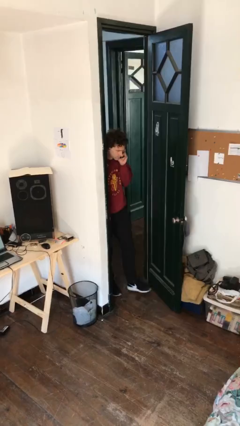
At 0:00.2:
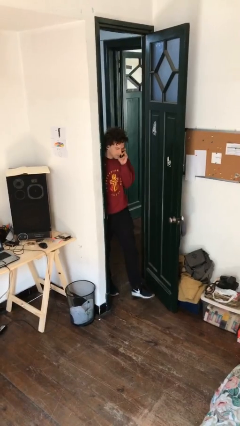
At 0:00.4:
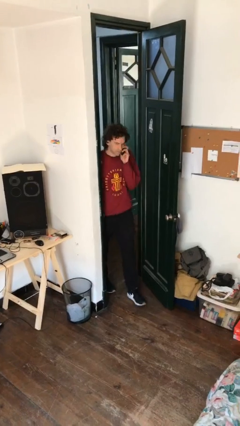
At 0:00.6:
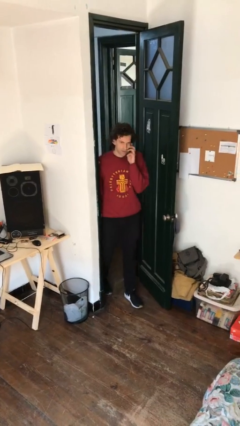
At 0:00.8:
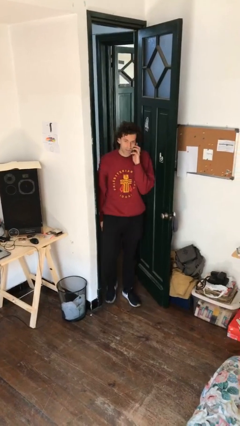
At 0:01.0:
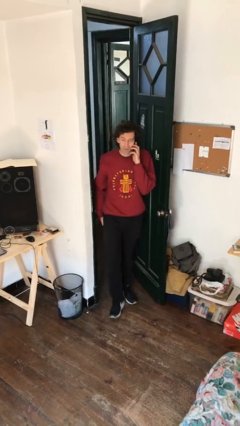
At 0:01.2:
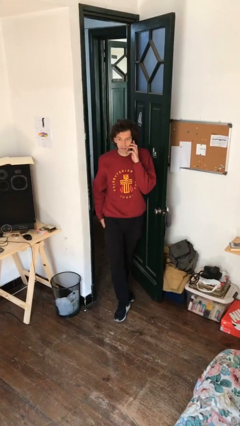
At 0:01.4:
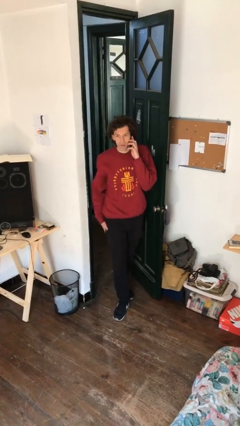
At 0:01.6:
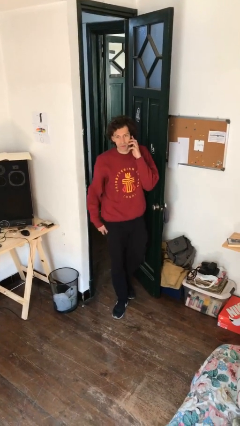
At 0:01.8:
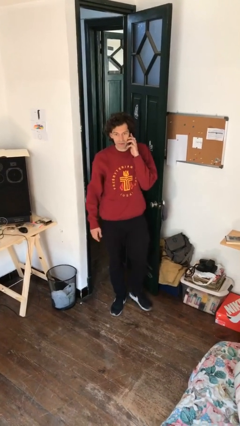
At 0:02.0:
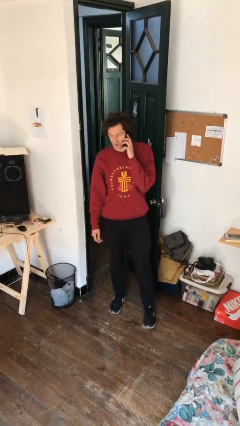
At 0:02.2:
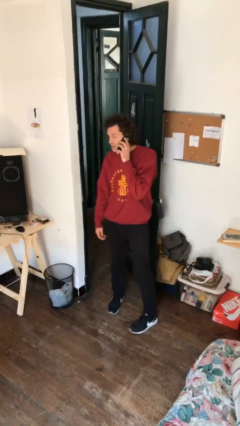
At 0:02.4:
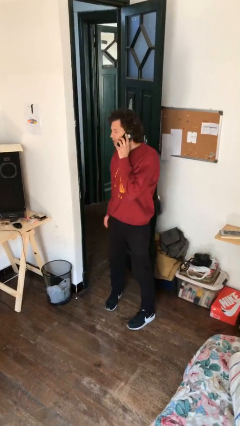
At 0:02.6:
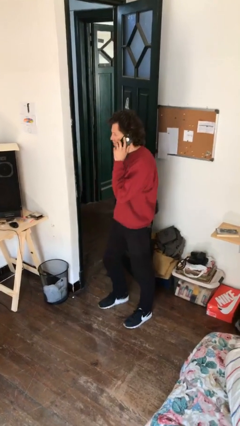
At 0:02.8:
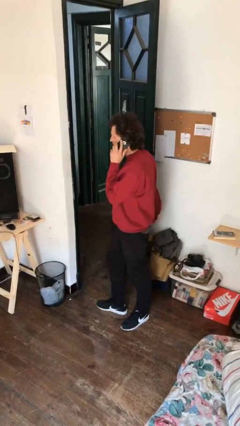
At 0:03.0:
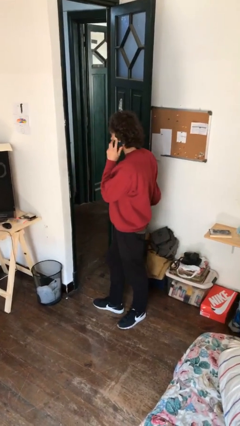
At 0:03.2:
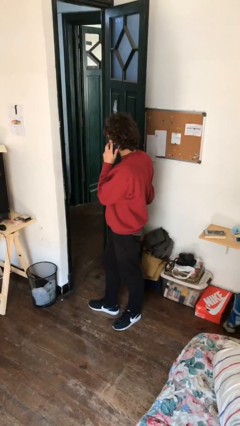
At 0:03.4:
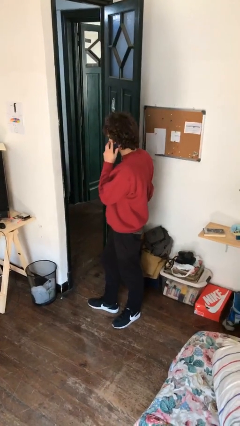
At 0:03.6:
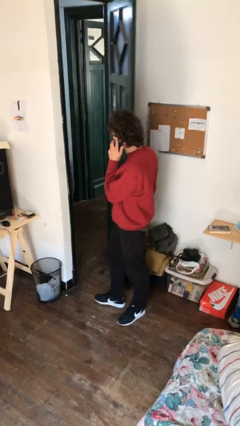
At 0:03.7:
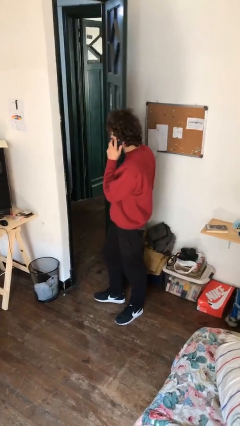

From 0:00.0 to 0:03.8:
person enters scene through structure

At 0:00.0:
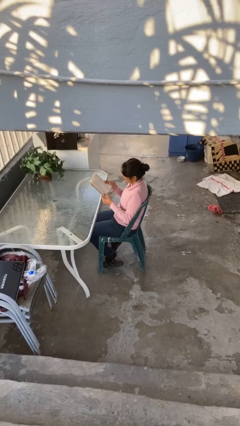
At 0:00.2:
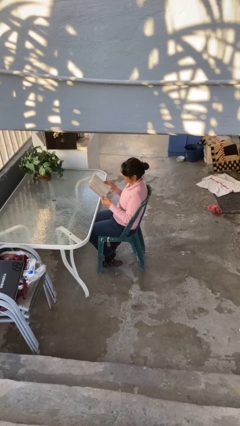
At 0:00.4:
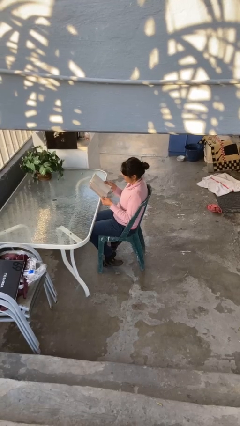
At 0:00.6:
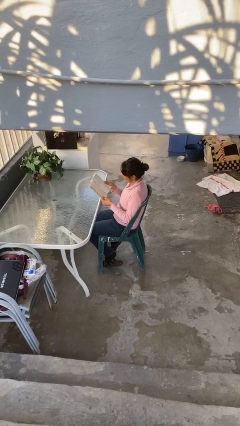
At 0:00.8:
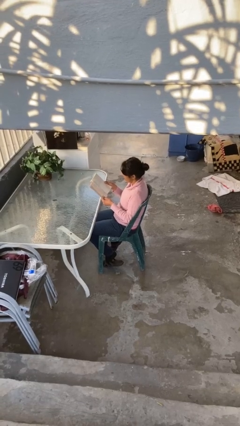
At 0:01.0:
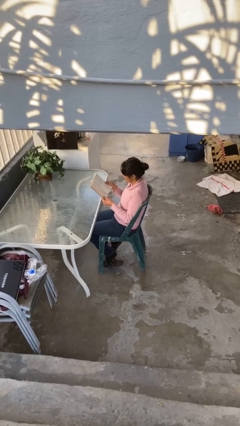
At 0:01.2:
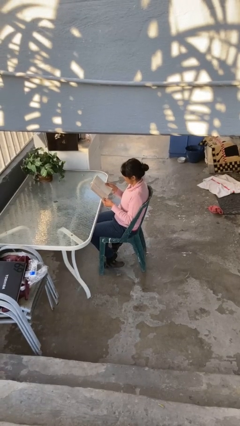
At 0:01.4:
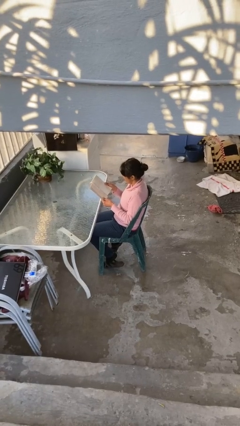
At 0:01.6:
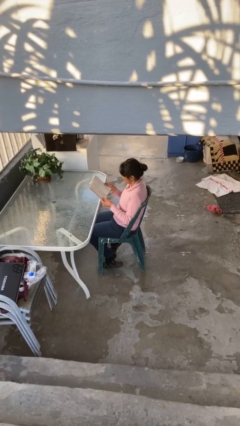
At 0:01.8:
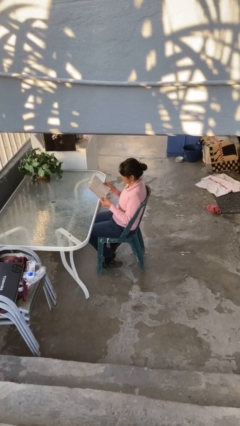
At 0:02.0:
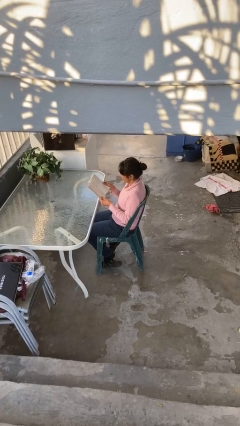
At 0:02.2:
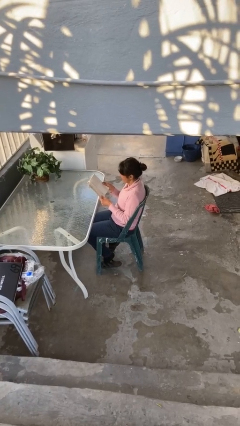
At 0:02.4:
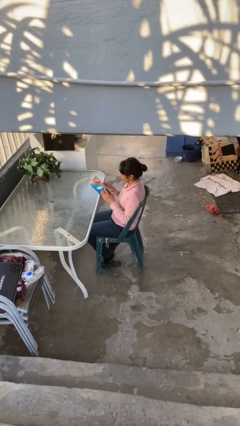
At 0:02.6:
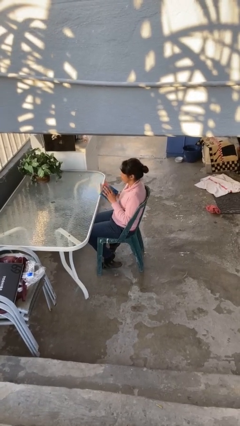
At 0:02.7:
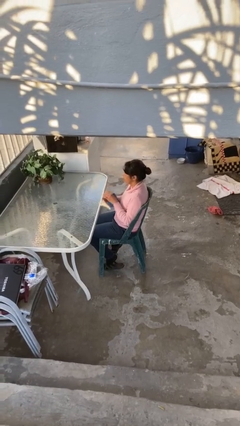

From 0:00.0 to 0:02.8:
person reads document

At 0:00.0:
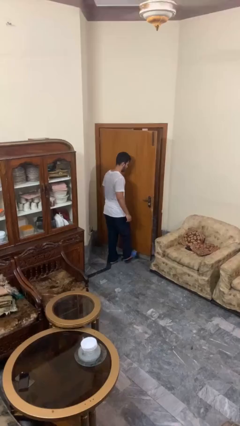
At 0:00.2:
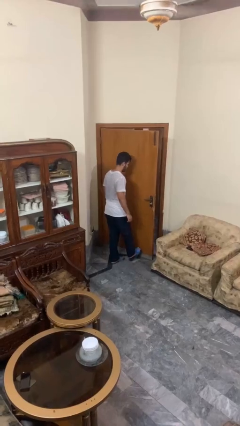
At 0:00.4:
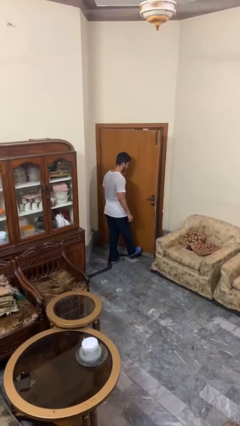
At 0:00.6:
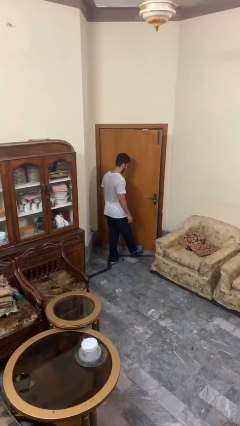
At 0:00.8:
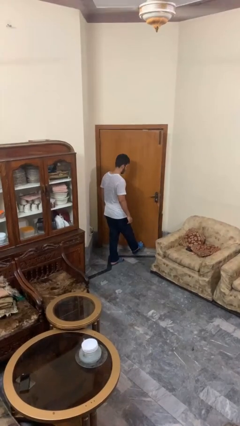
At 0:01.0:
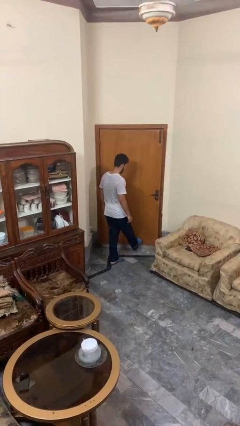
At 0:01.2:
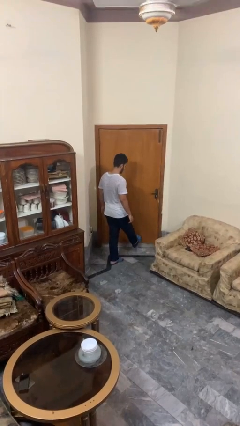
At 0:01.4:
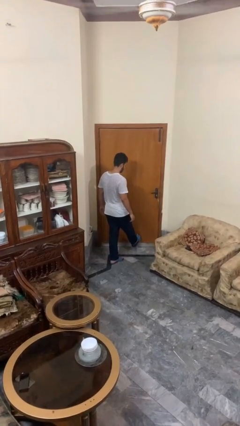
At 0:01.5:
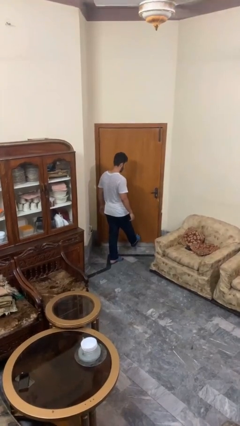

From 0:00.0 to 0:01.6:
person closes door with foot

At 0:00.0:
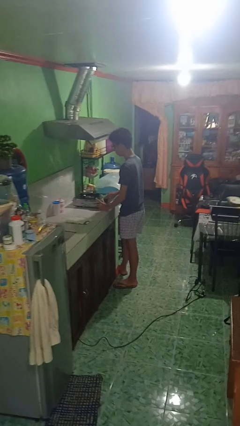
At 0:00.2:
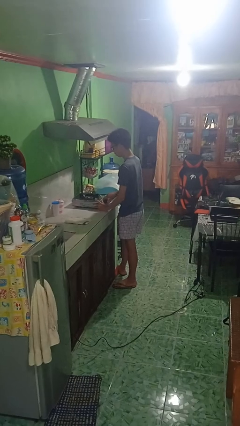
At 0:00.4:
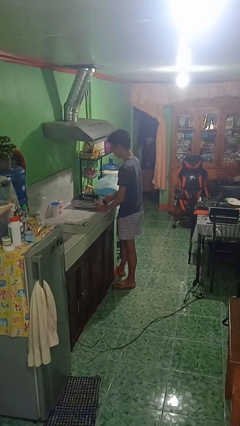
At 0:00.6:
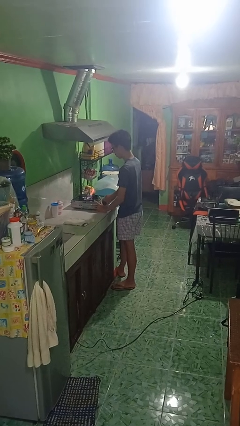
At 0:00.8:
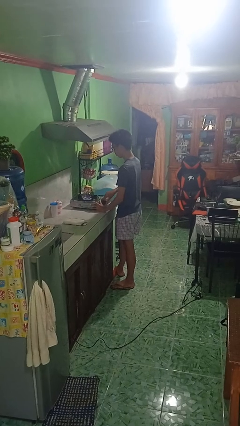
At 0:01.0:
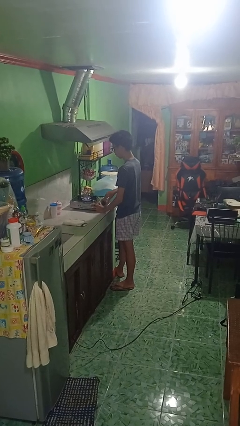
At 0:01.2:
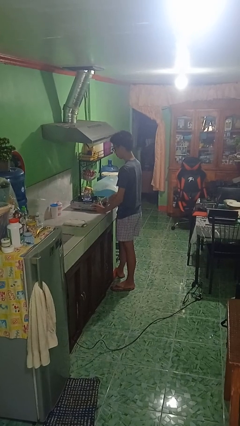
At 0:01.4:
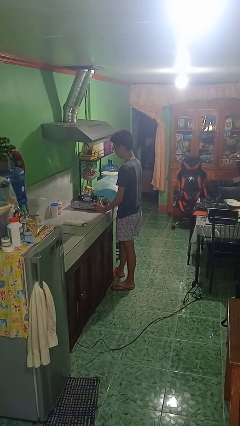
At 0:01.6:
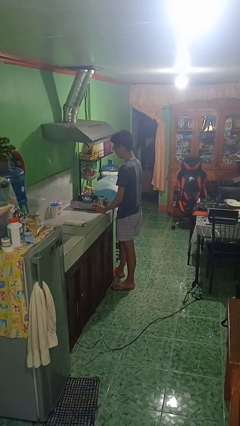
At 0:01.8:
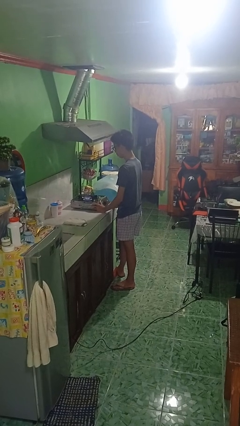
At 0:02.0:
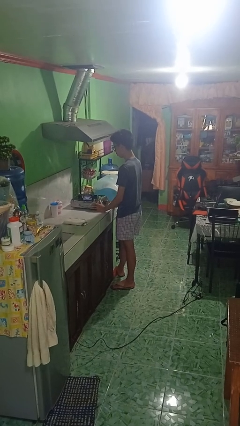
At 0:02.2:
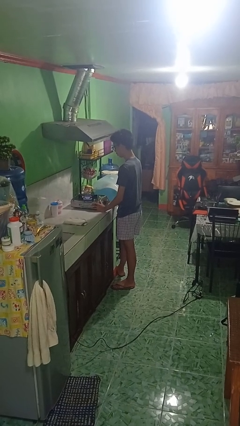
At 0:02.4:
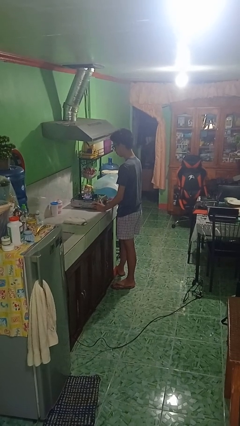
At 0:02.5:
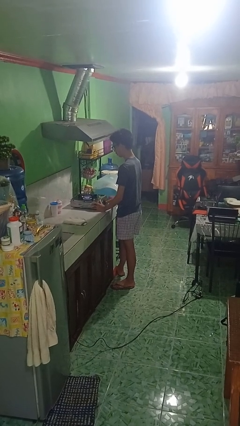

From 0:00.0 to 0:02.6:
person turns on stovetop

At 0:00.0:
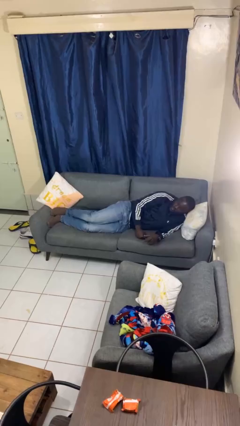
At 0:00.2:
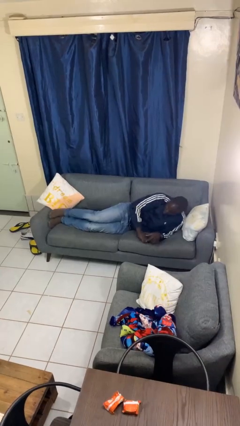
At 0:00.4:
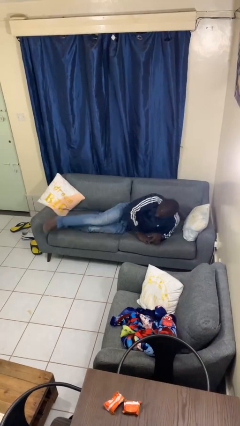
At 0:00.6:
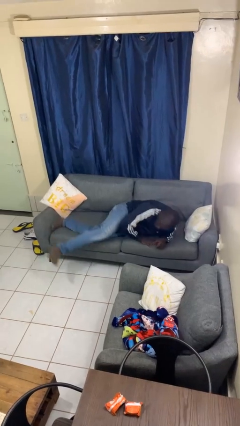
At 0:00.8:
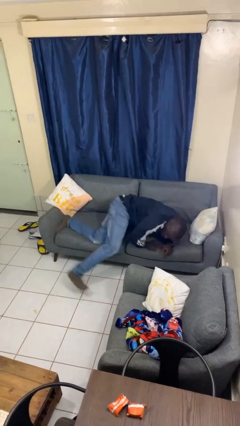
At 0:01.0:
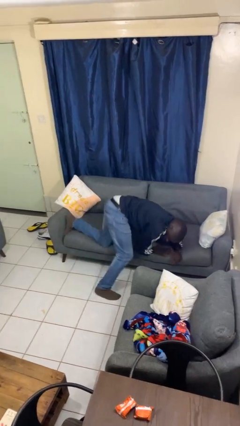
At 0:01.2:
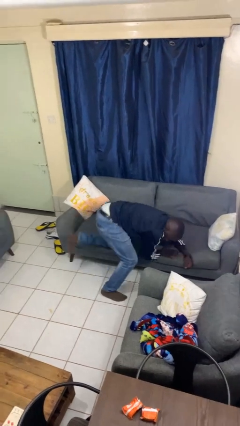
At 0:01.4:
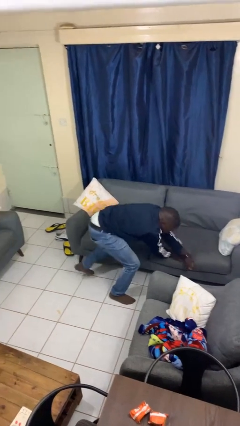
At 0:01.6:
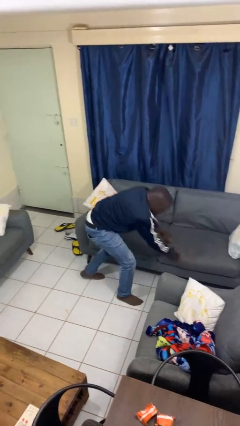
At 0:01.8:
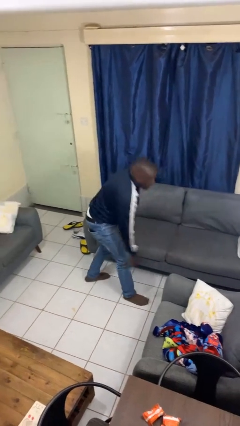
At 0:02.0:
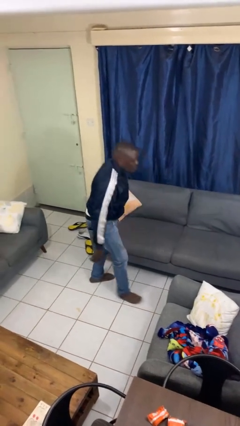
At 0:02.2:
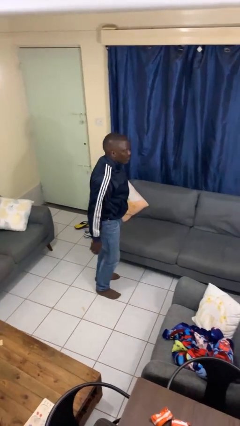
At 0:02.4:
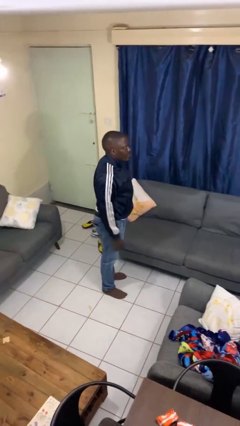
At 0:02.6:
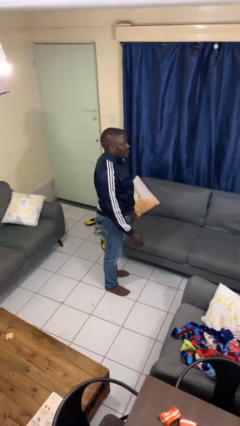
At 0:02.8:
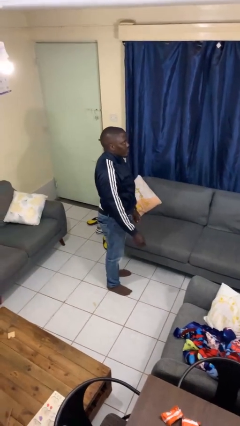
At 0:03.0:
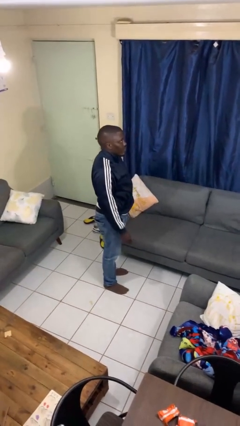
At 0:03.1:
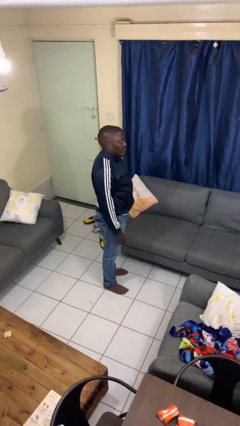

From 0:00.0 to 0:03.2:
person stands up

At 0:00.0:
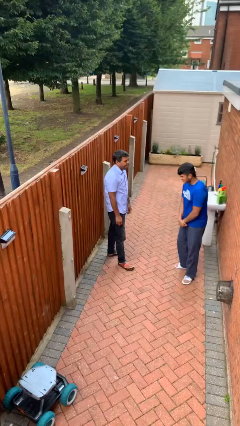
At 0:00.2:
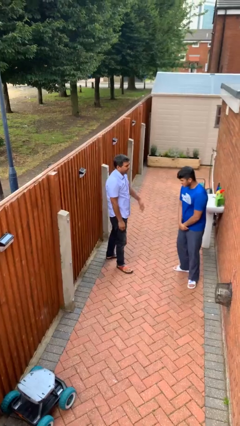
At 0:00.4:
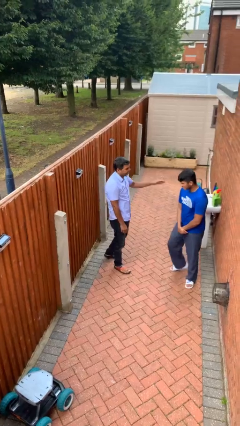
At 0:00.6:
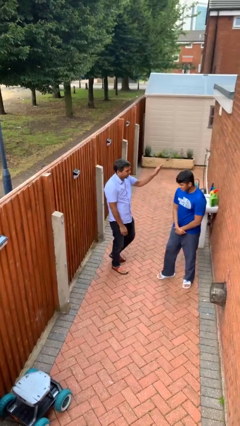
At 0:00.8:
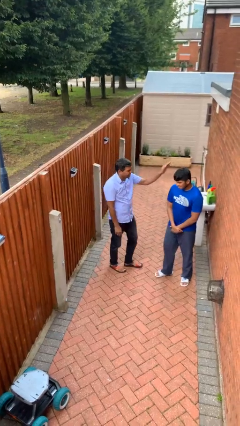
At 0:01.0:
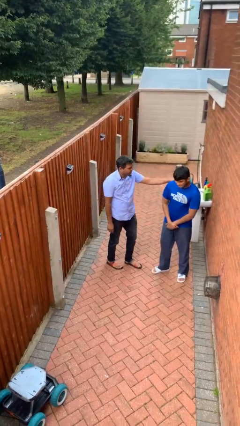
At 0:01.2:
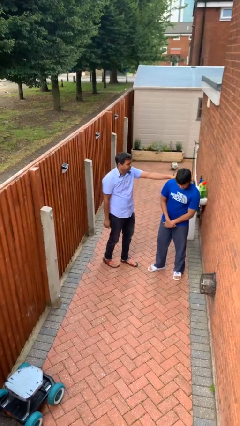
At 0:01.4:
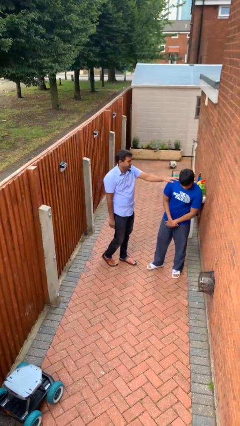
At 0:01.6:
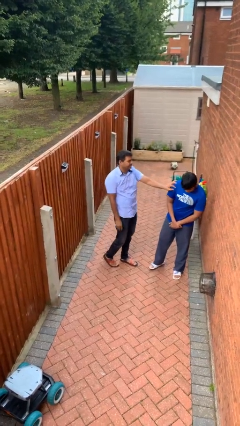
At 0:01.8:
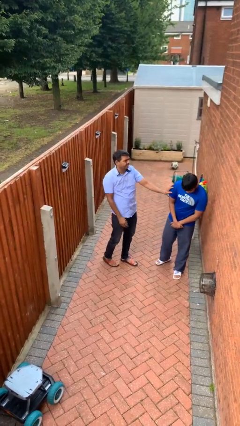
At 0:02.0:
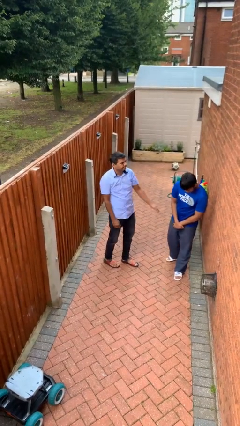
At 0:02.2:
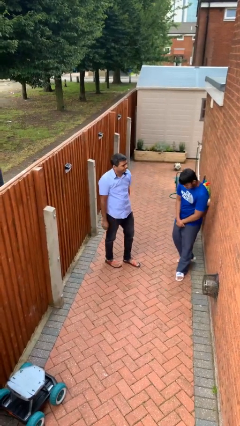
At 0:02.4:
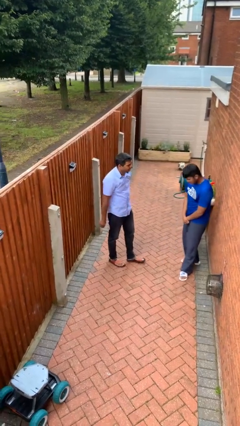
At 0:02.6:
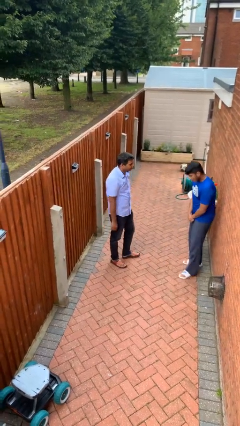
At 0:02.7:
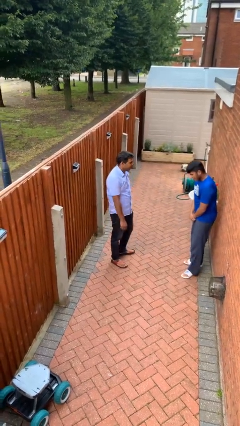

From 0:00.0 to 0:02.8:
person shoves person

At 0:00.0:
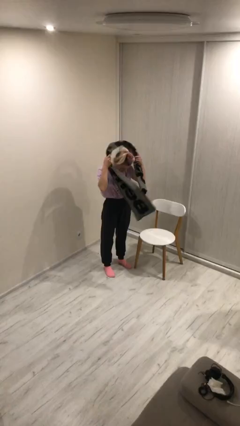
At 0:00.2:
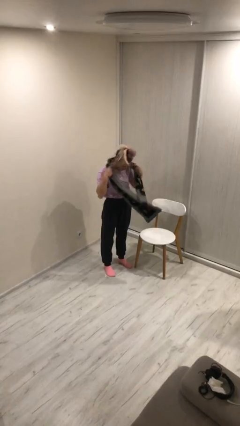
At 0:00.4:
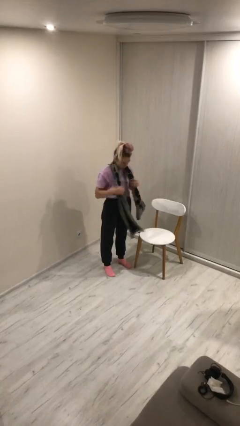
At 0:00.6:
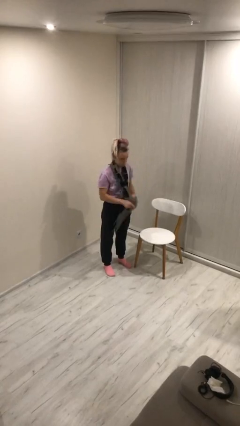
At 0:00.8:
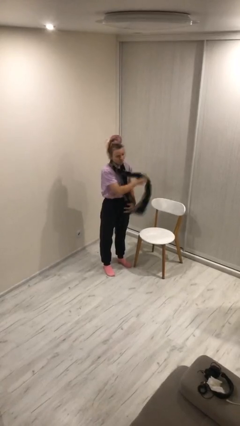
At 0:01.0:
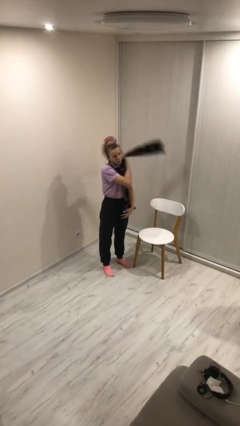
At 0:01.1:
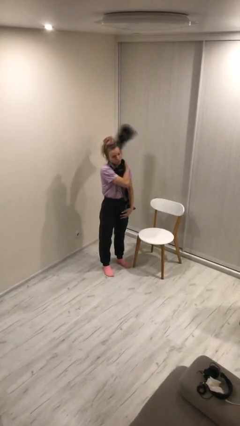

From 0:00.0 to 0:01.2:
person puts on scarf
